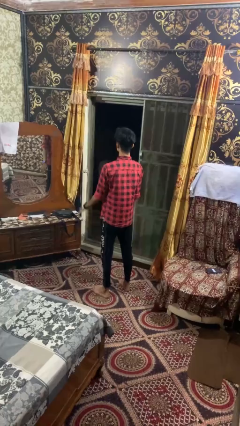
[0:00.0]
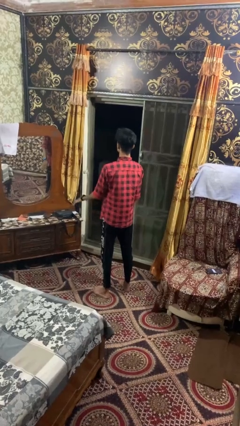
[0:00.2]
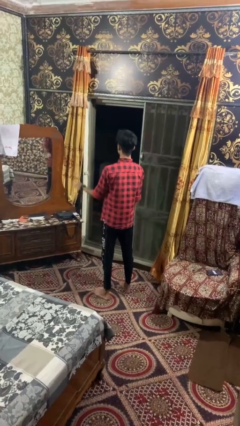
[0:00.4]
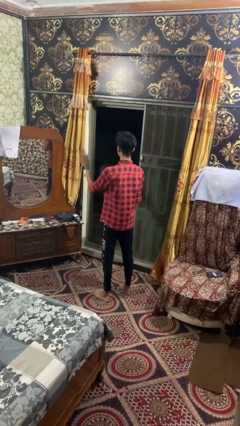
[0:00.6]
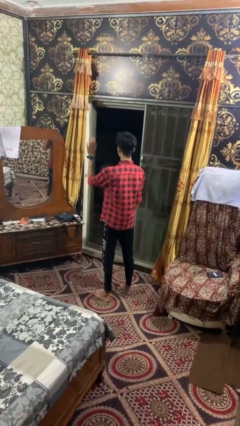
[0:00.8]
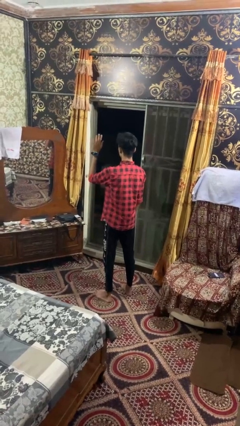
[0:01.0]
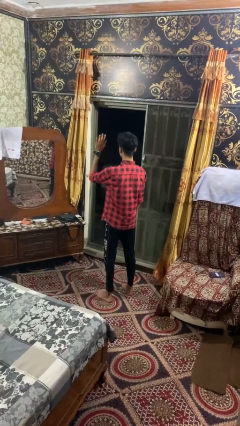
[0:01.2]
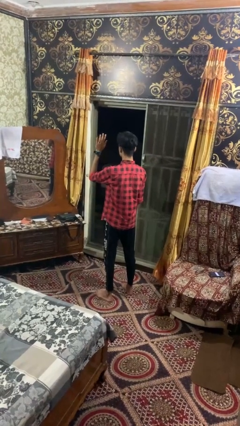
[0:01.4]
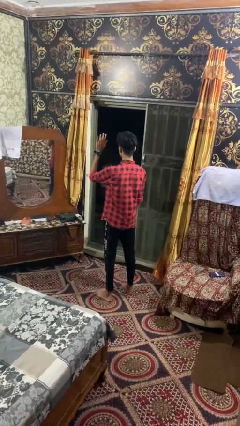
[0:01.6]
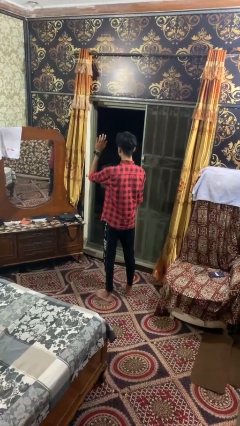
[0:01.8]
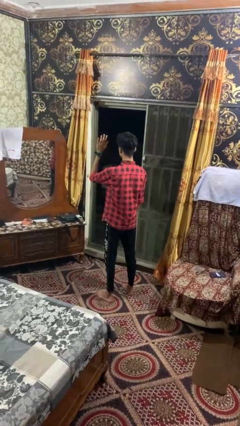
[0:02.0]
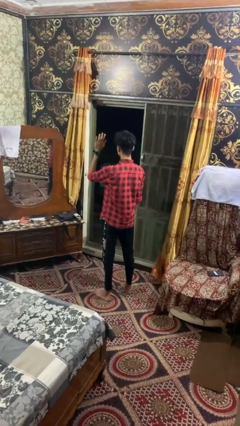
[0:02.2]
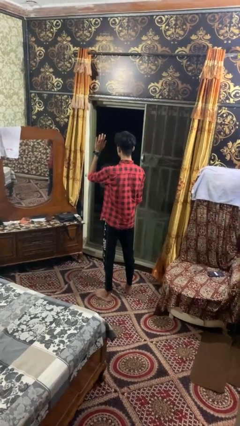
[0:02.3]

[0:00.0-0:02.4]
person gestures raise hand

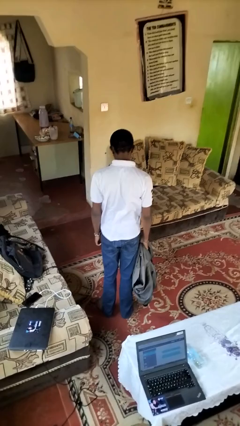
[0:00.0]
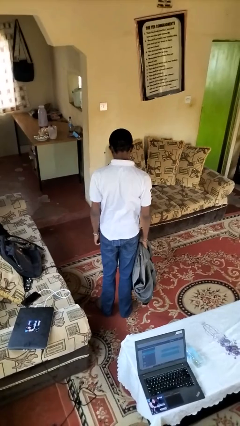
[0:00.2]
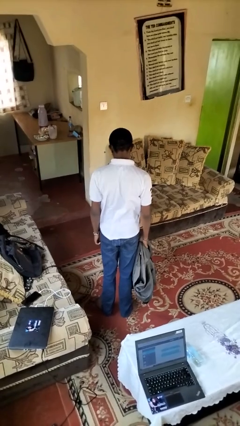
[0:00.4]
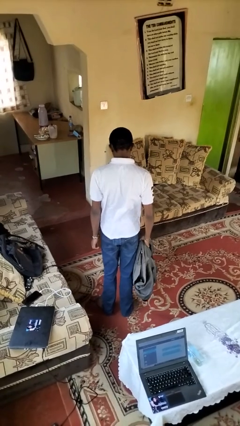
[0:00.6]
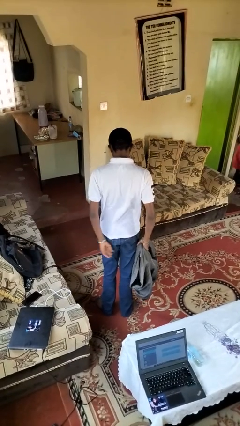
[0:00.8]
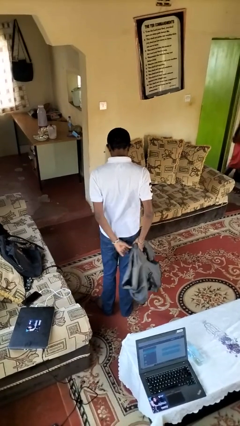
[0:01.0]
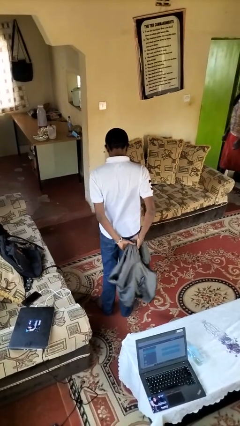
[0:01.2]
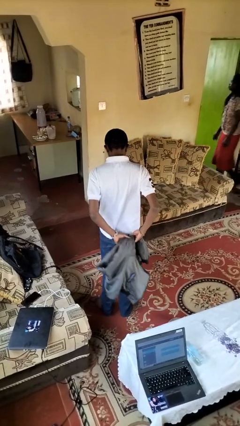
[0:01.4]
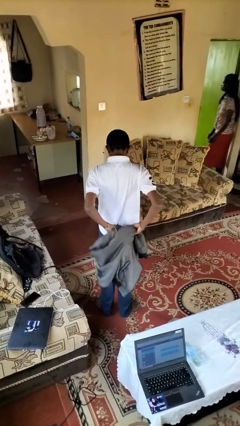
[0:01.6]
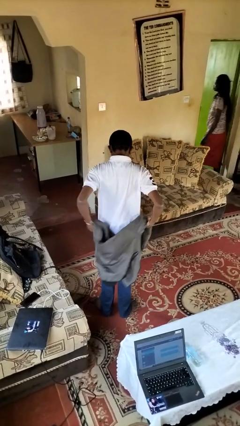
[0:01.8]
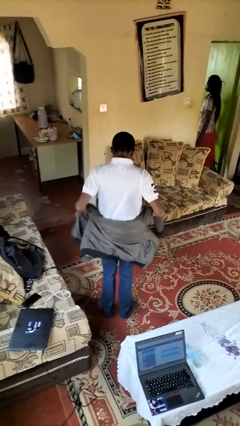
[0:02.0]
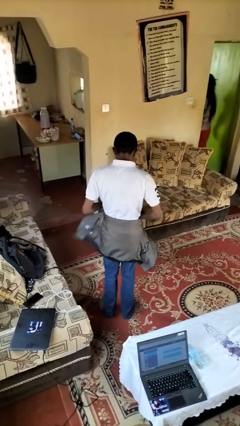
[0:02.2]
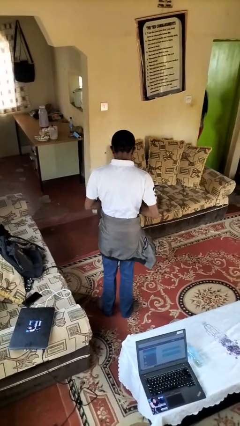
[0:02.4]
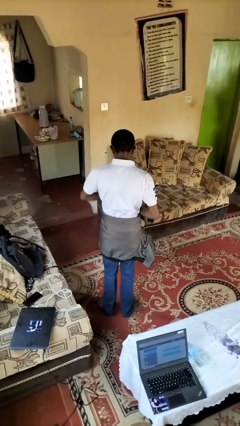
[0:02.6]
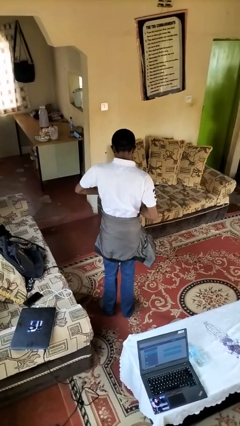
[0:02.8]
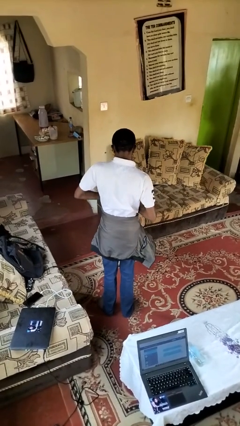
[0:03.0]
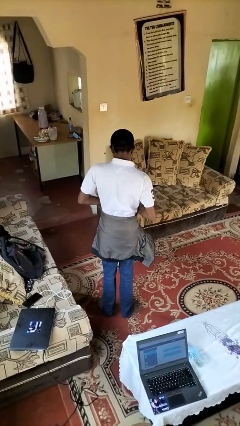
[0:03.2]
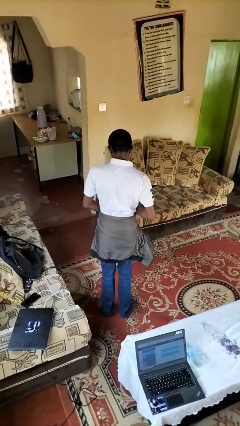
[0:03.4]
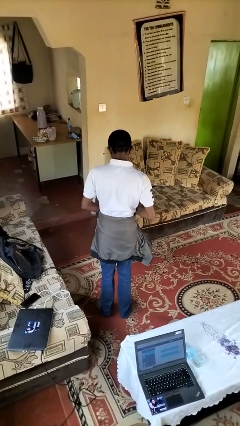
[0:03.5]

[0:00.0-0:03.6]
person ties jacket around waist

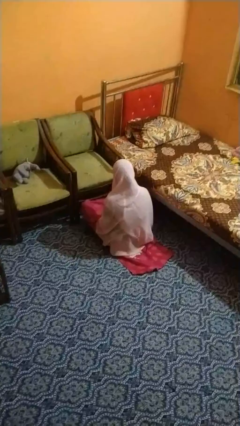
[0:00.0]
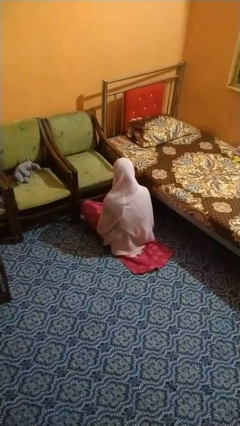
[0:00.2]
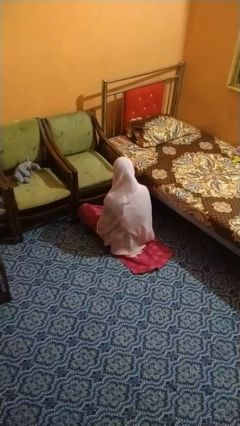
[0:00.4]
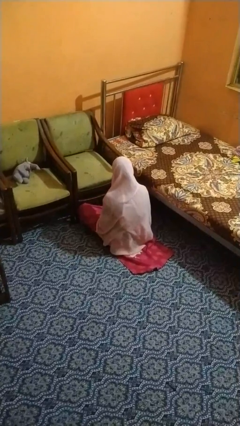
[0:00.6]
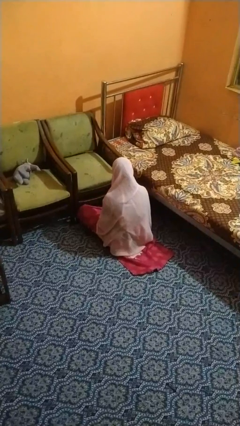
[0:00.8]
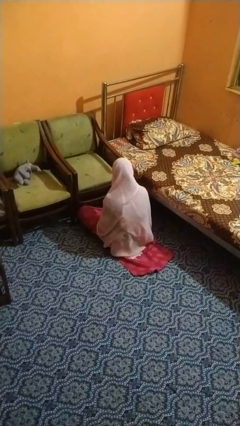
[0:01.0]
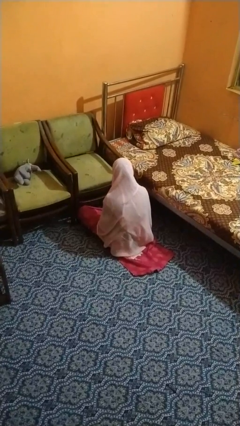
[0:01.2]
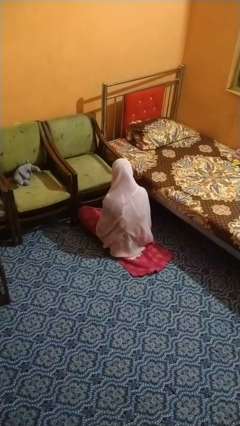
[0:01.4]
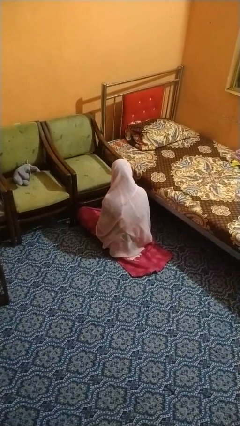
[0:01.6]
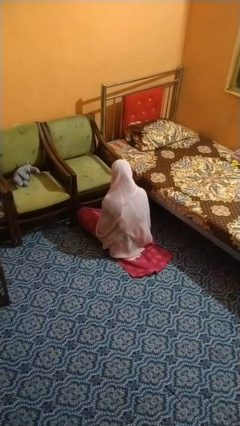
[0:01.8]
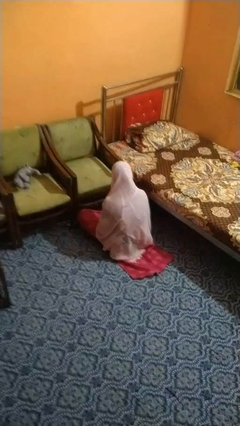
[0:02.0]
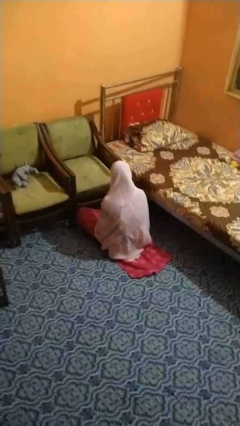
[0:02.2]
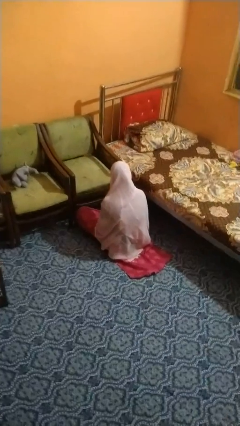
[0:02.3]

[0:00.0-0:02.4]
person crosses legs

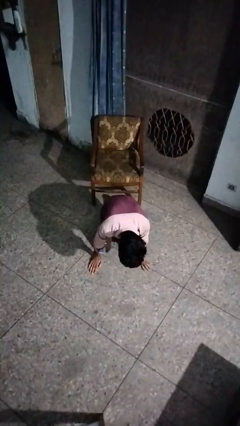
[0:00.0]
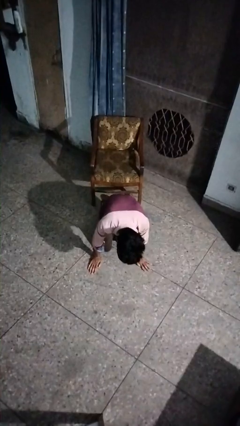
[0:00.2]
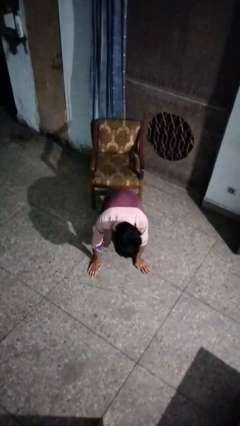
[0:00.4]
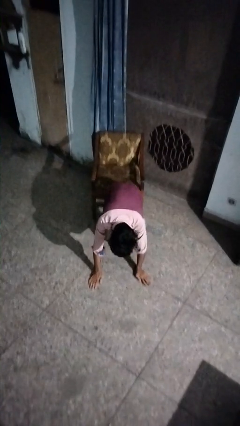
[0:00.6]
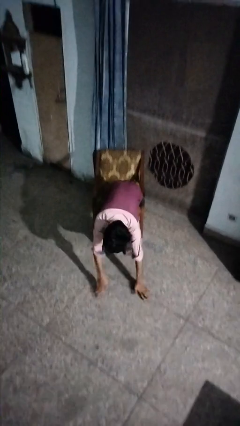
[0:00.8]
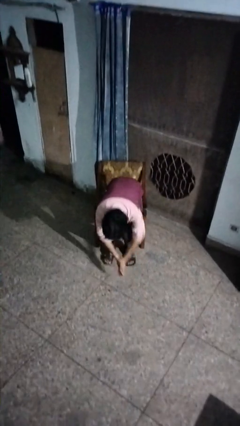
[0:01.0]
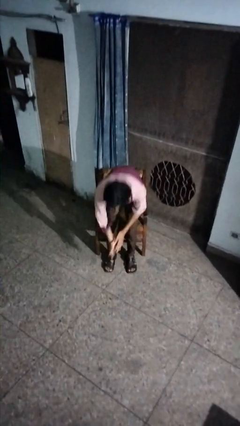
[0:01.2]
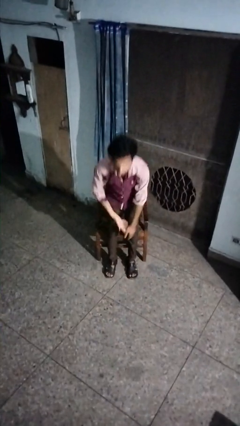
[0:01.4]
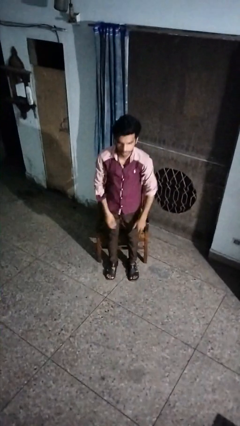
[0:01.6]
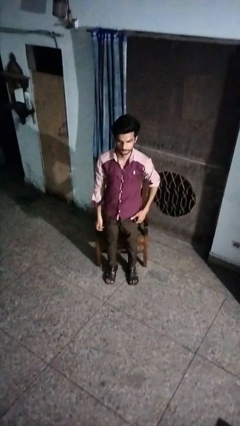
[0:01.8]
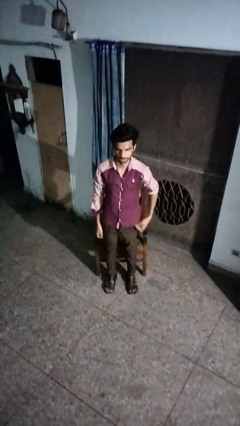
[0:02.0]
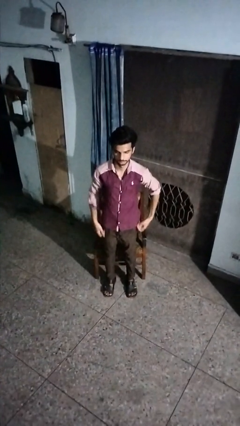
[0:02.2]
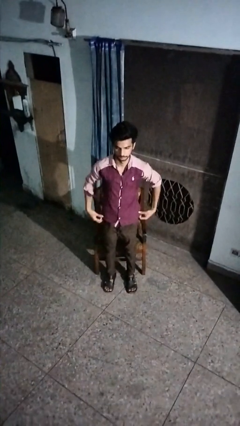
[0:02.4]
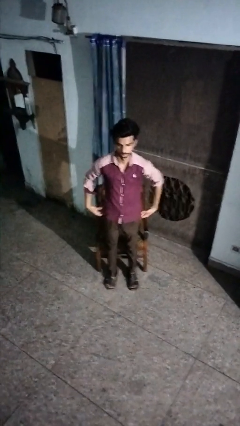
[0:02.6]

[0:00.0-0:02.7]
person stands up from floor

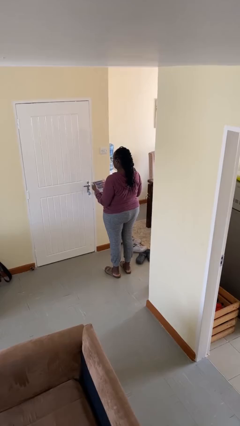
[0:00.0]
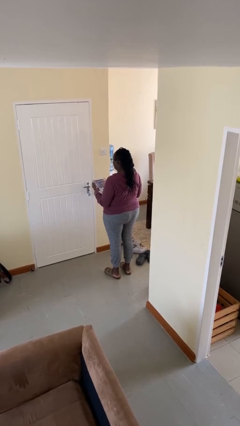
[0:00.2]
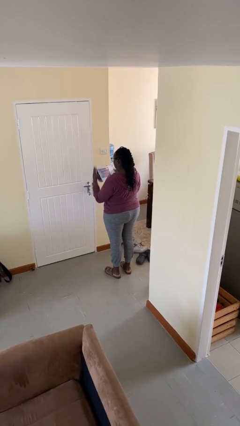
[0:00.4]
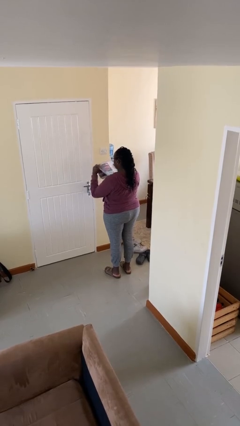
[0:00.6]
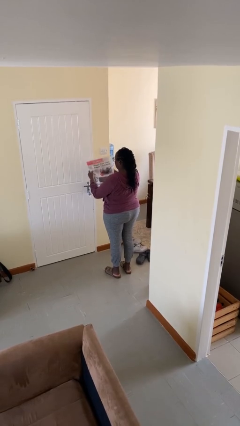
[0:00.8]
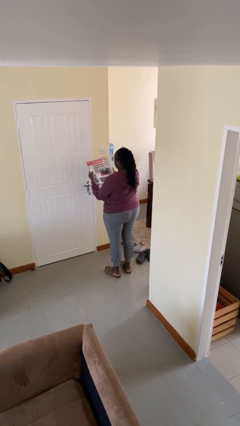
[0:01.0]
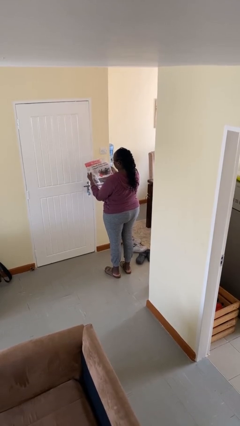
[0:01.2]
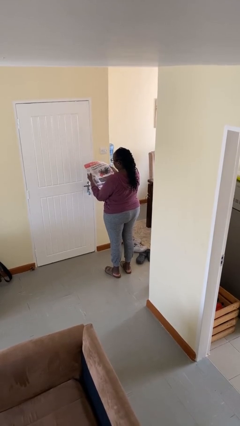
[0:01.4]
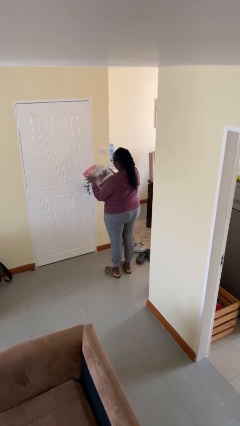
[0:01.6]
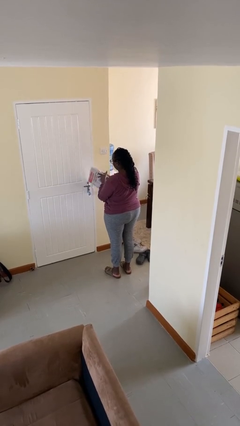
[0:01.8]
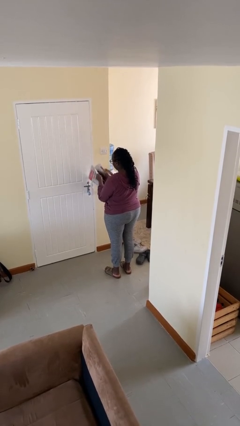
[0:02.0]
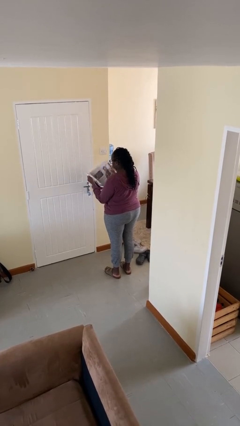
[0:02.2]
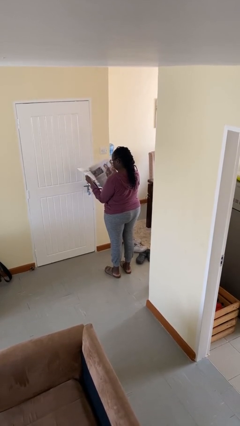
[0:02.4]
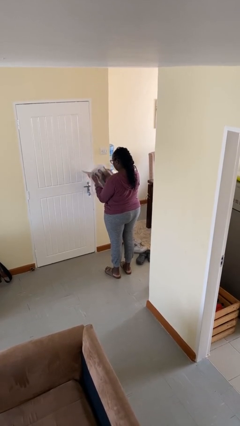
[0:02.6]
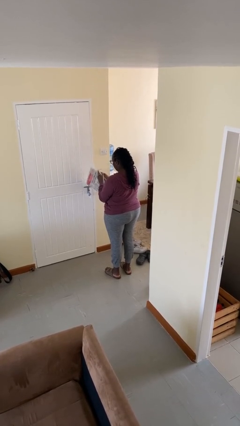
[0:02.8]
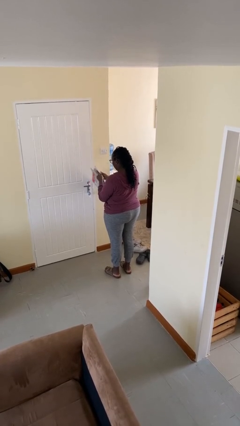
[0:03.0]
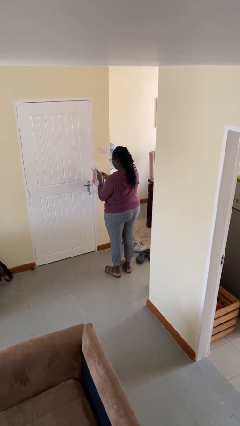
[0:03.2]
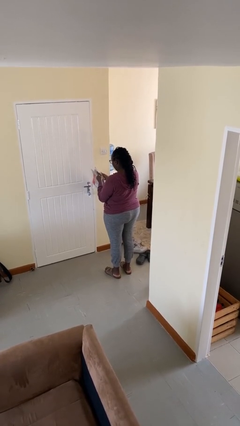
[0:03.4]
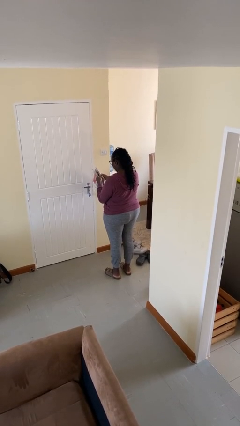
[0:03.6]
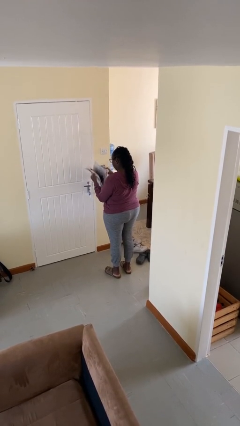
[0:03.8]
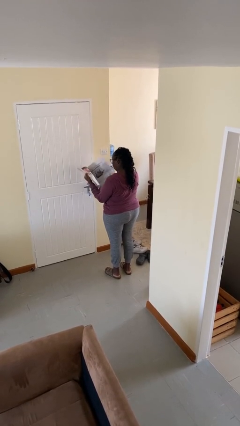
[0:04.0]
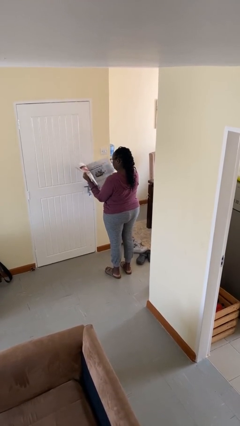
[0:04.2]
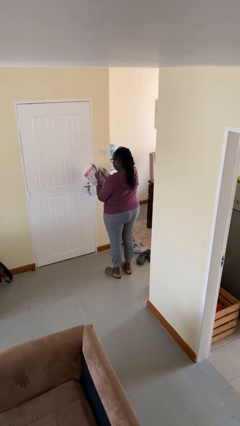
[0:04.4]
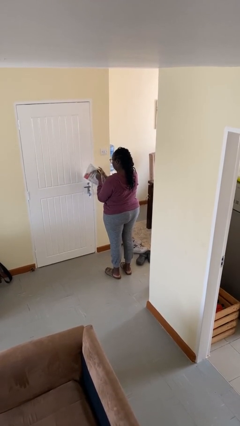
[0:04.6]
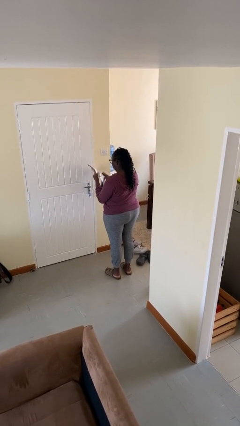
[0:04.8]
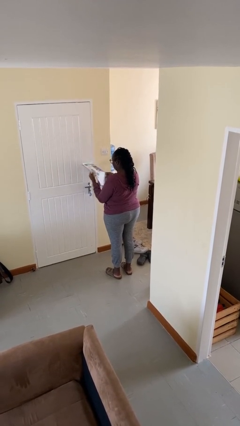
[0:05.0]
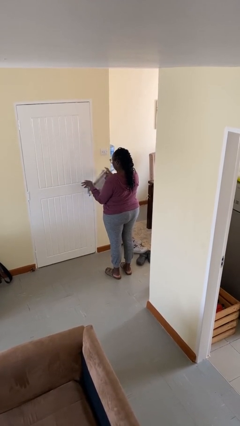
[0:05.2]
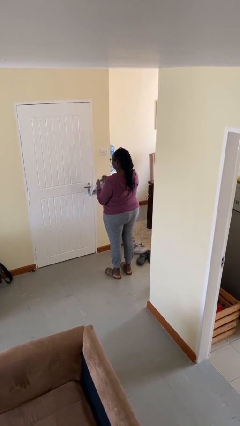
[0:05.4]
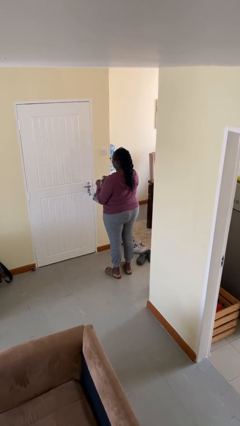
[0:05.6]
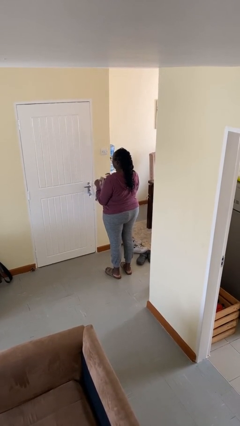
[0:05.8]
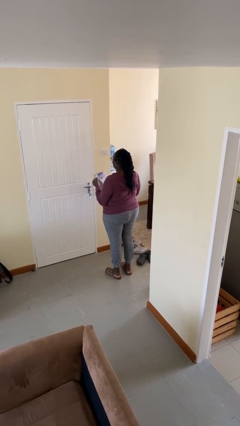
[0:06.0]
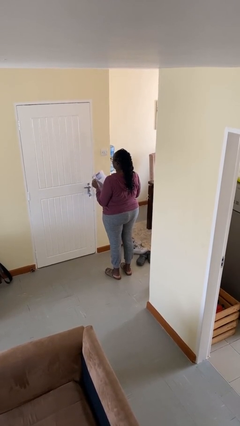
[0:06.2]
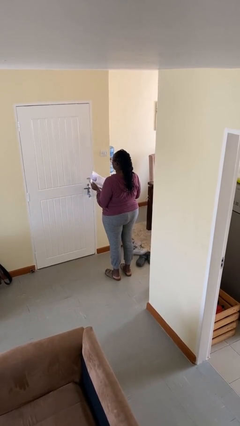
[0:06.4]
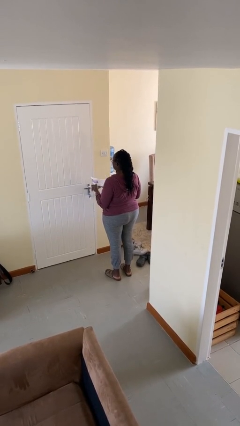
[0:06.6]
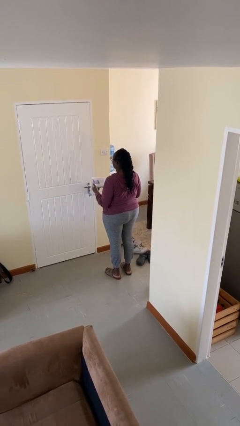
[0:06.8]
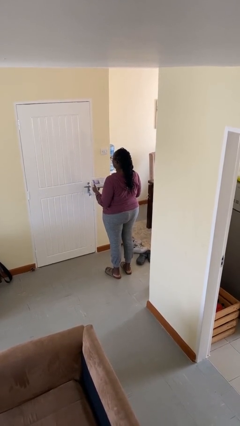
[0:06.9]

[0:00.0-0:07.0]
person reads newspaper
